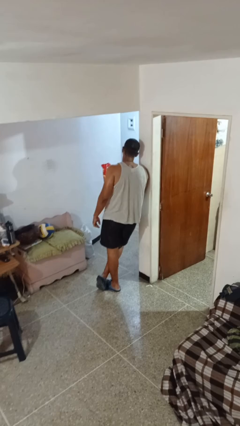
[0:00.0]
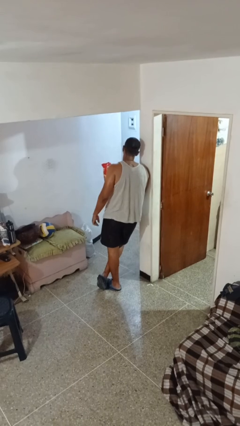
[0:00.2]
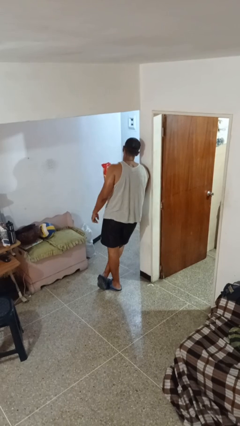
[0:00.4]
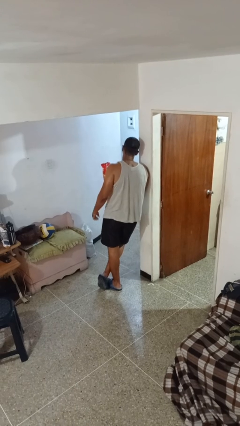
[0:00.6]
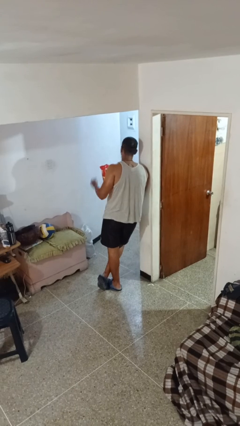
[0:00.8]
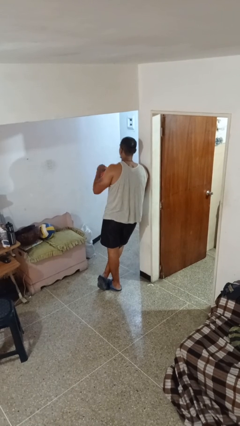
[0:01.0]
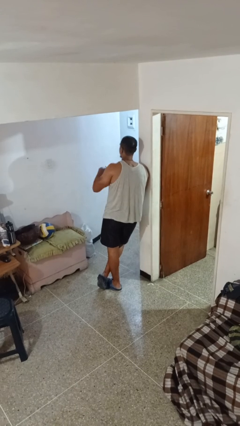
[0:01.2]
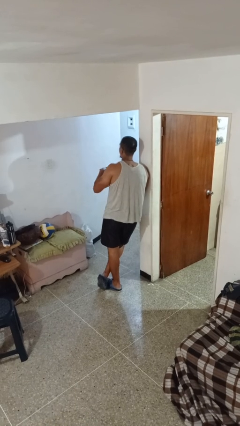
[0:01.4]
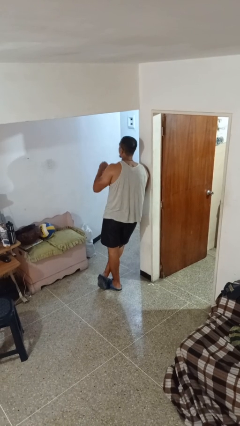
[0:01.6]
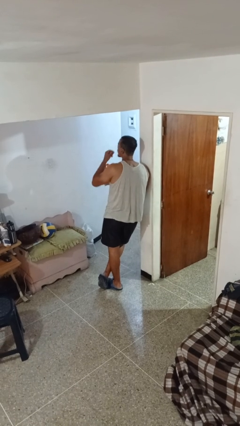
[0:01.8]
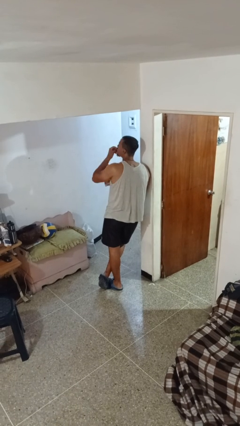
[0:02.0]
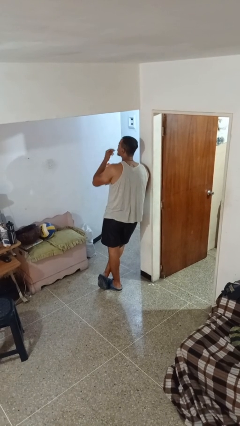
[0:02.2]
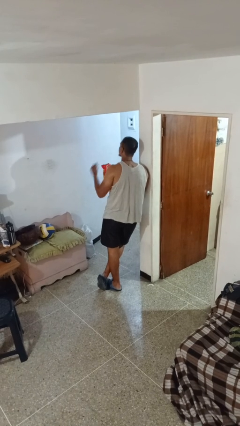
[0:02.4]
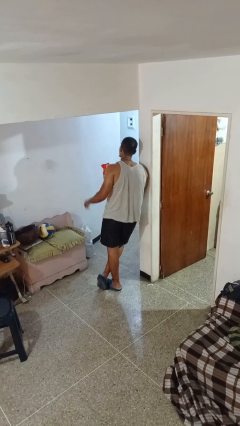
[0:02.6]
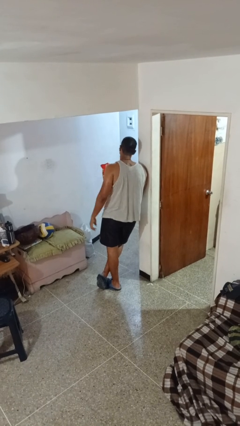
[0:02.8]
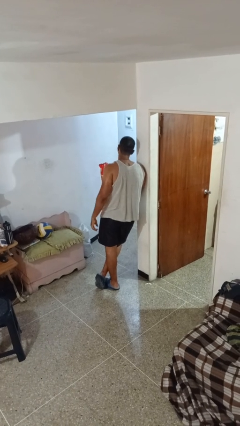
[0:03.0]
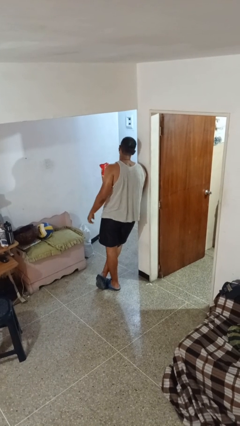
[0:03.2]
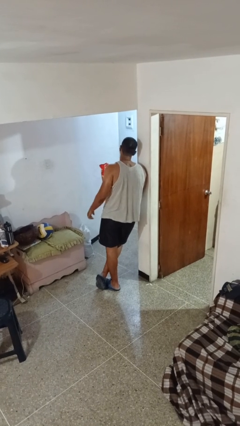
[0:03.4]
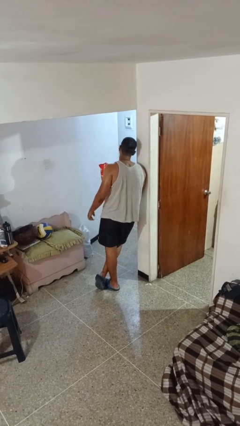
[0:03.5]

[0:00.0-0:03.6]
person eats snack from bag

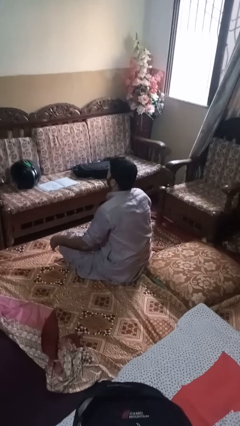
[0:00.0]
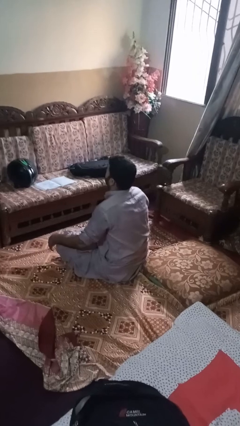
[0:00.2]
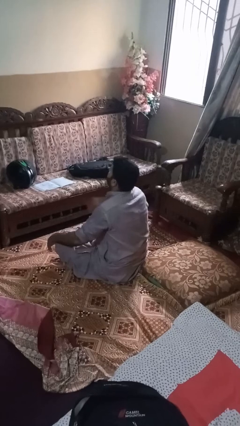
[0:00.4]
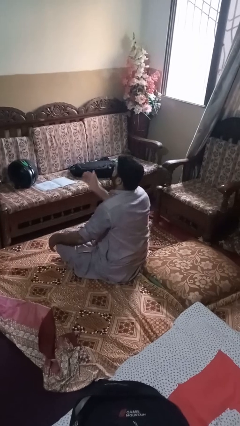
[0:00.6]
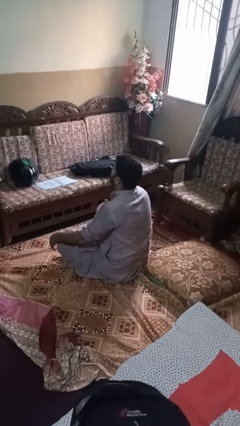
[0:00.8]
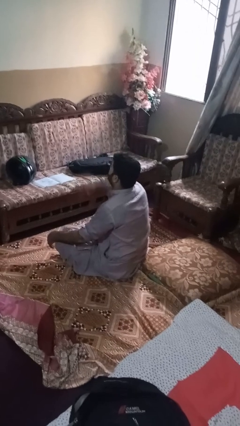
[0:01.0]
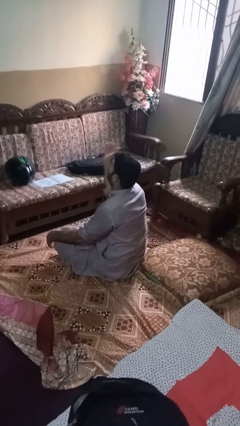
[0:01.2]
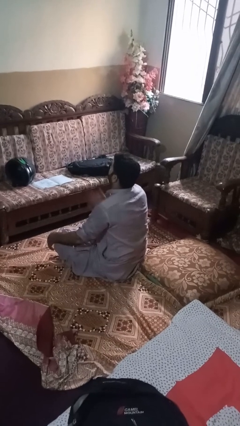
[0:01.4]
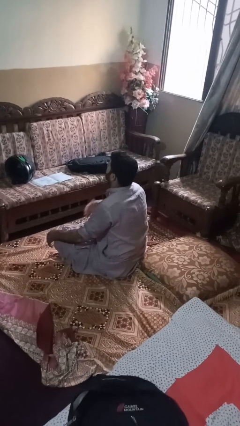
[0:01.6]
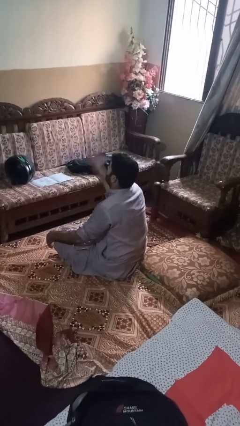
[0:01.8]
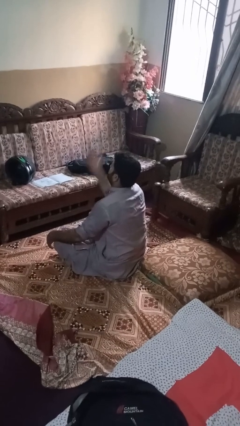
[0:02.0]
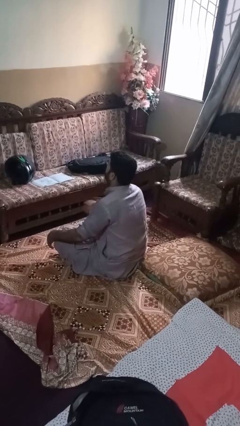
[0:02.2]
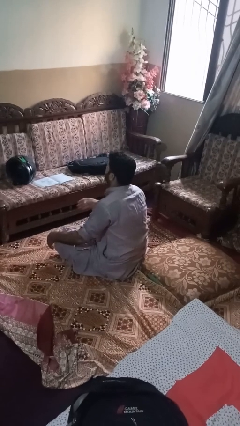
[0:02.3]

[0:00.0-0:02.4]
person drums on chest

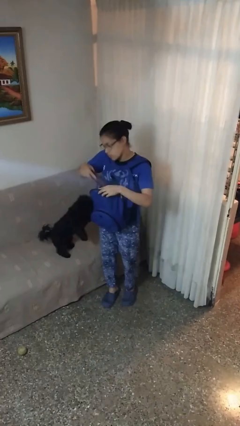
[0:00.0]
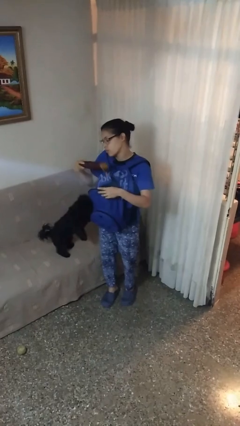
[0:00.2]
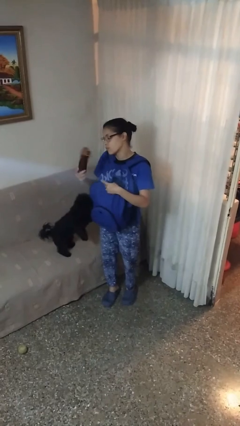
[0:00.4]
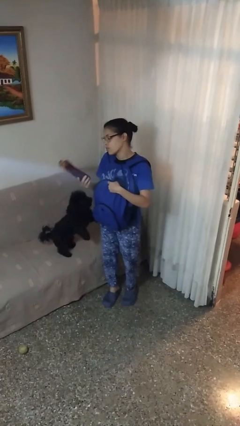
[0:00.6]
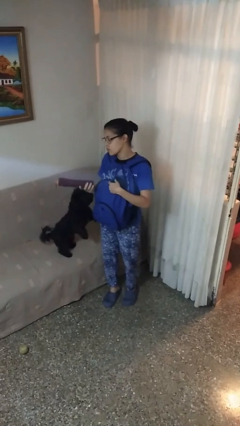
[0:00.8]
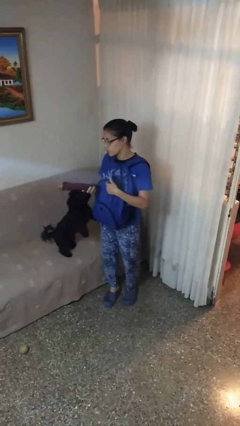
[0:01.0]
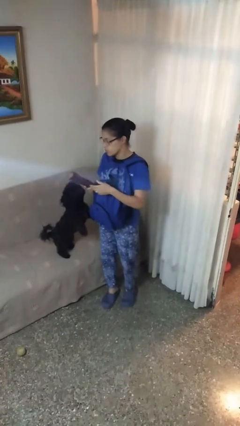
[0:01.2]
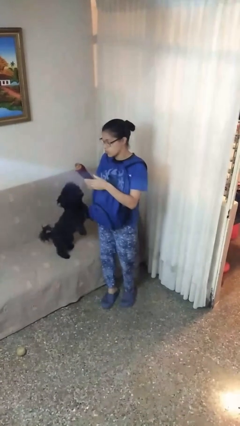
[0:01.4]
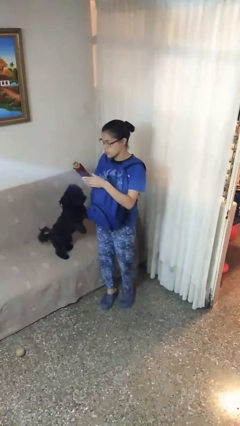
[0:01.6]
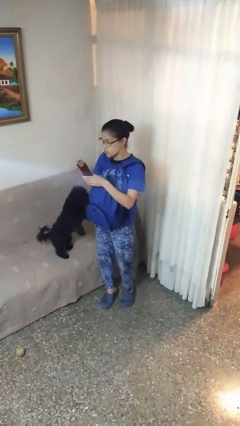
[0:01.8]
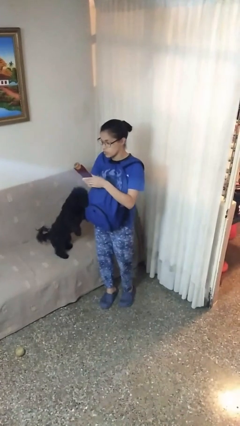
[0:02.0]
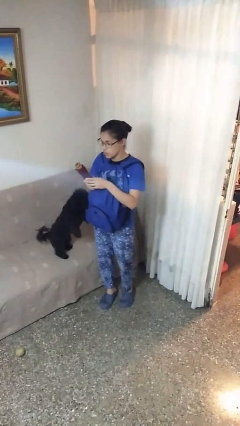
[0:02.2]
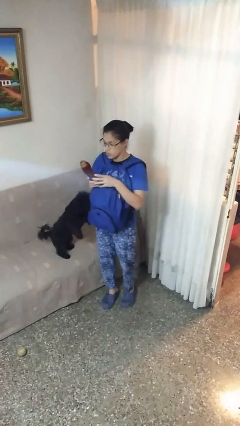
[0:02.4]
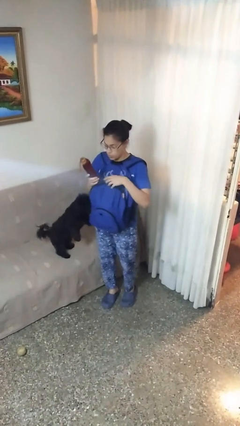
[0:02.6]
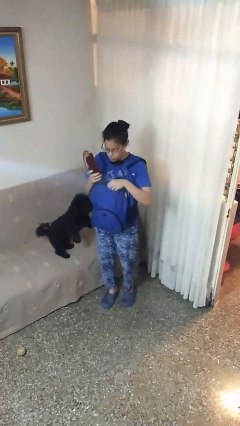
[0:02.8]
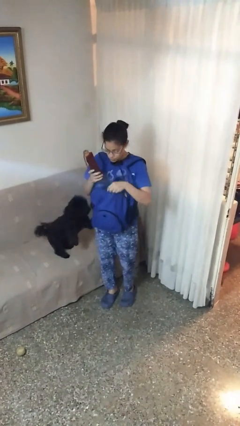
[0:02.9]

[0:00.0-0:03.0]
person takes object from backpack

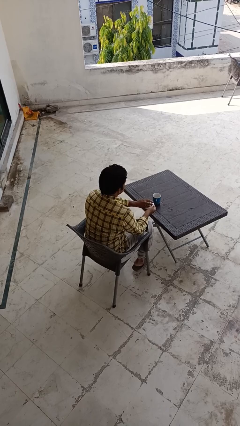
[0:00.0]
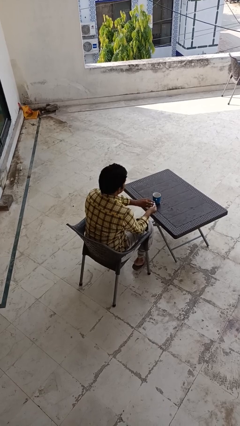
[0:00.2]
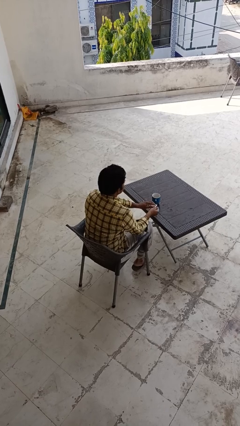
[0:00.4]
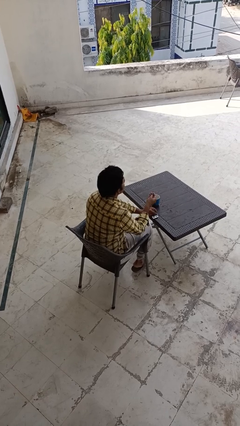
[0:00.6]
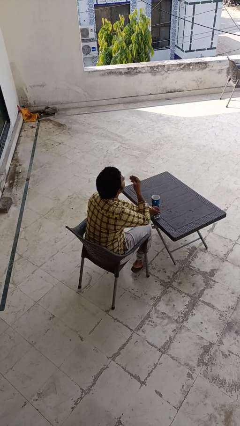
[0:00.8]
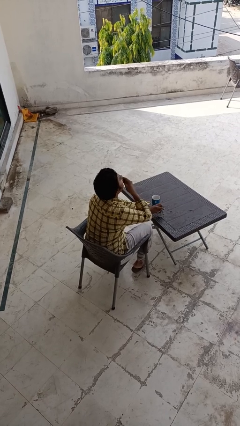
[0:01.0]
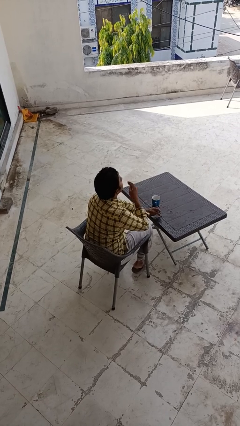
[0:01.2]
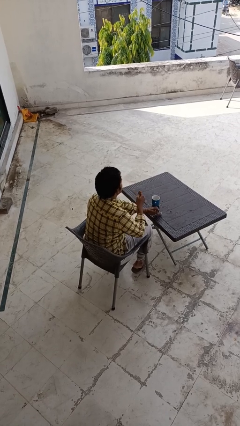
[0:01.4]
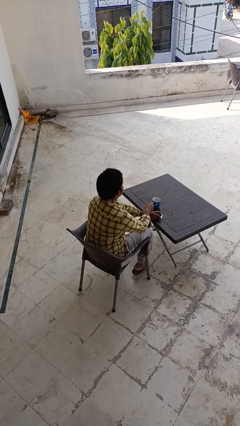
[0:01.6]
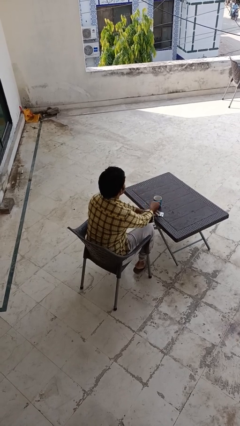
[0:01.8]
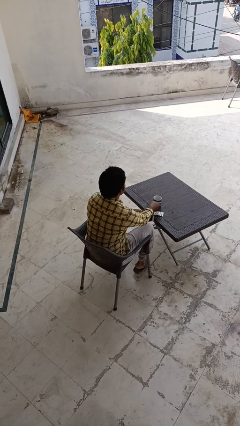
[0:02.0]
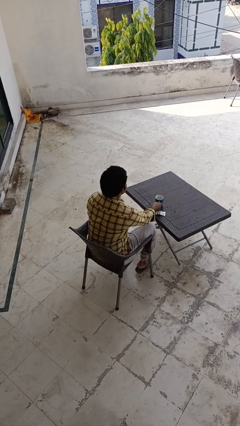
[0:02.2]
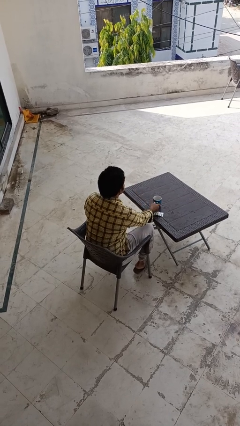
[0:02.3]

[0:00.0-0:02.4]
person takes medicine pills

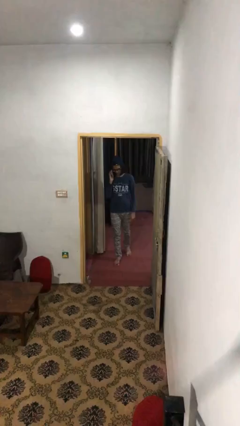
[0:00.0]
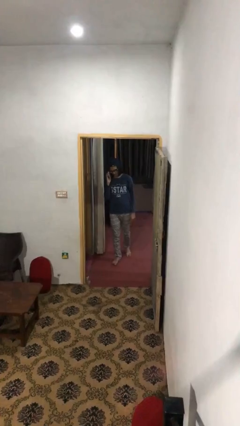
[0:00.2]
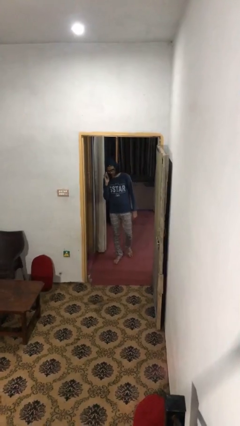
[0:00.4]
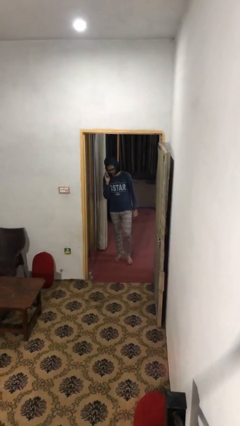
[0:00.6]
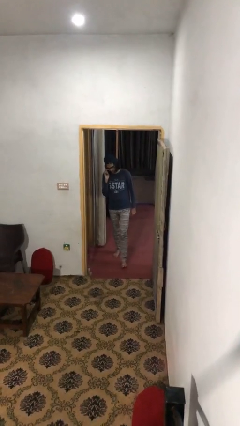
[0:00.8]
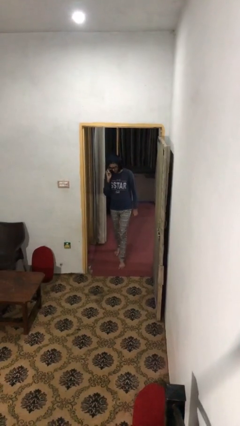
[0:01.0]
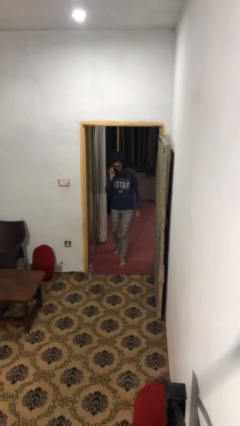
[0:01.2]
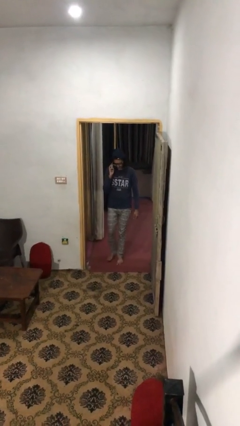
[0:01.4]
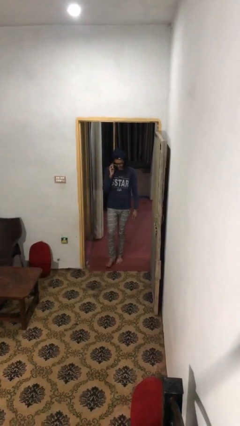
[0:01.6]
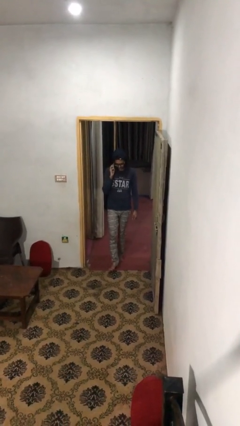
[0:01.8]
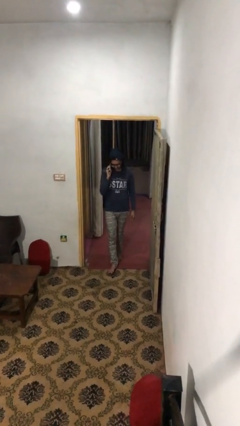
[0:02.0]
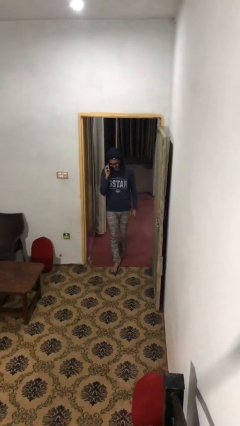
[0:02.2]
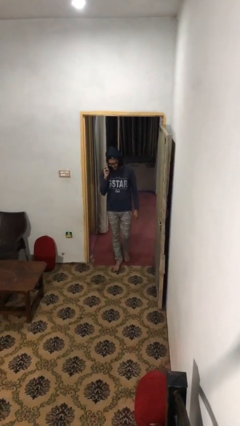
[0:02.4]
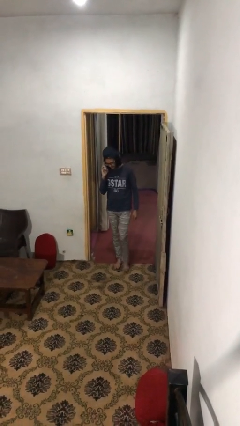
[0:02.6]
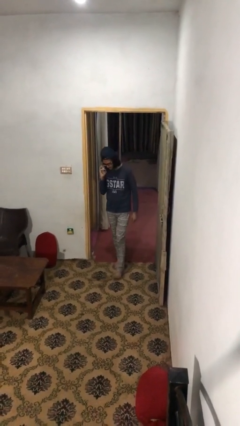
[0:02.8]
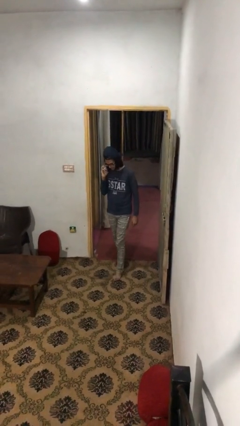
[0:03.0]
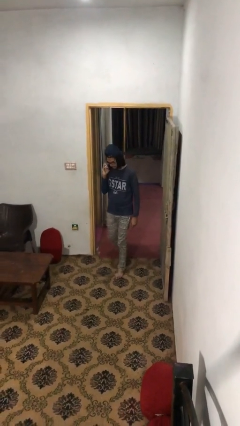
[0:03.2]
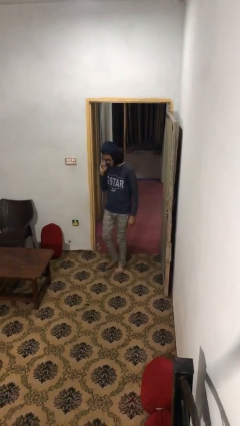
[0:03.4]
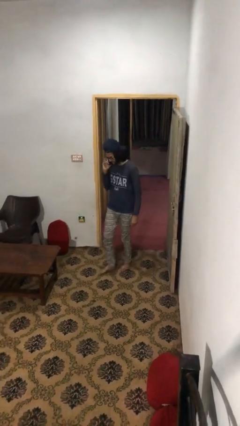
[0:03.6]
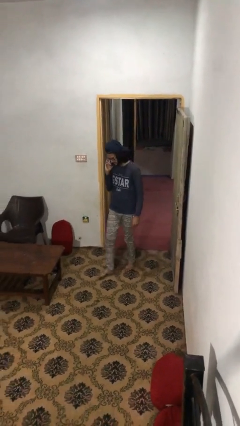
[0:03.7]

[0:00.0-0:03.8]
person enters scene through structure

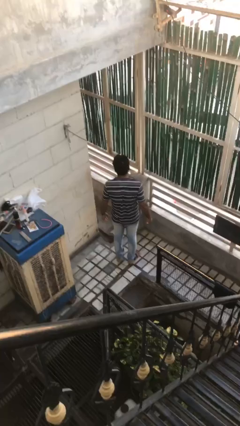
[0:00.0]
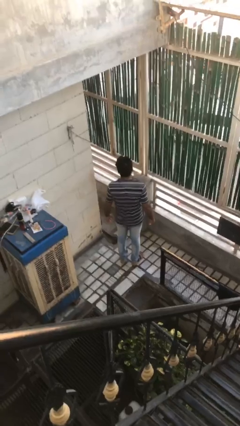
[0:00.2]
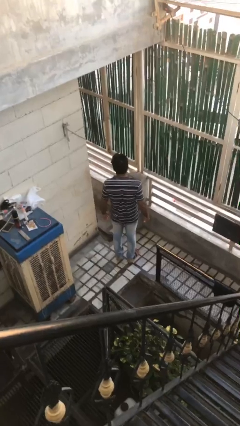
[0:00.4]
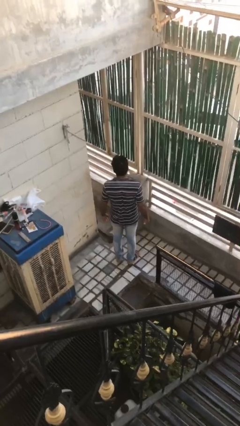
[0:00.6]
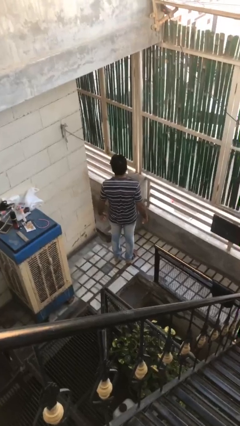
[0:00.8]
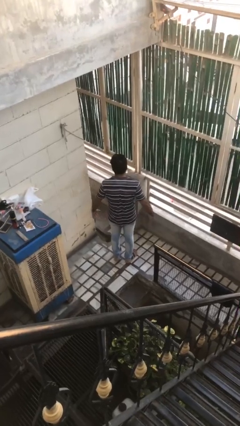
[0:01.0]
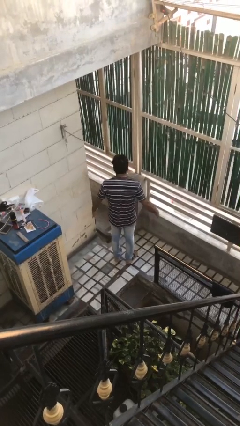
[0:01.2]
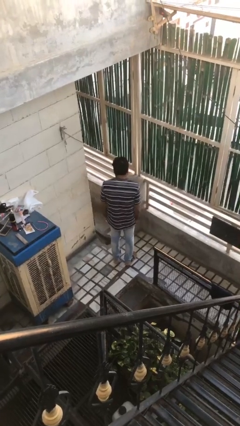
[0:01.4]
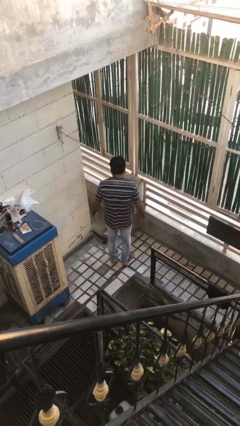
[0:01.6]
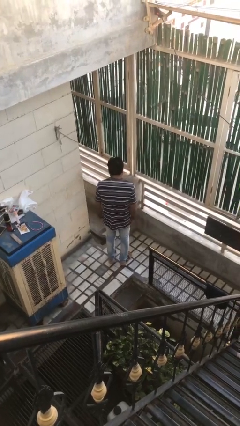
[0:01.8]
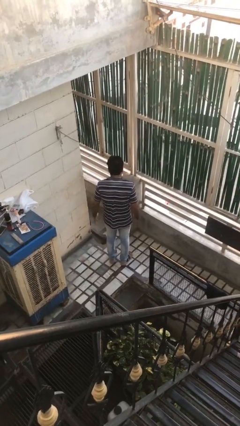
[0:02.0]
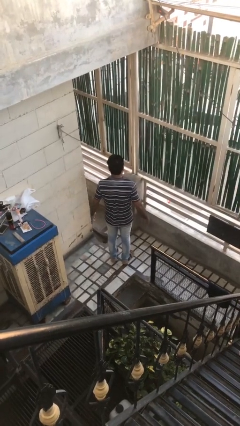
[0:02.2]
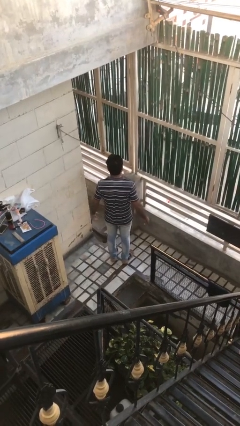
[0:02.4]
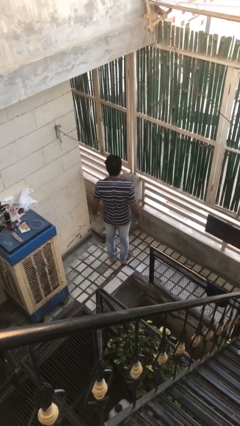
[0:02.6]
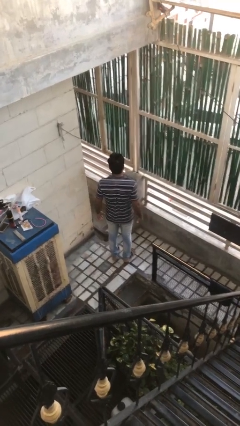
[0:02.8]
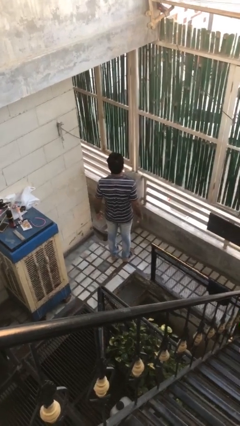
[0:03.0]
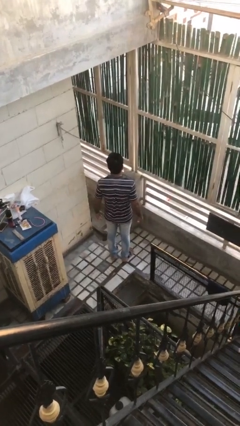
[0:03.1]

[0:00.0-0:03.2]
person slaps hands on thighs
